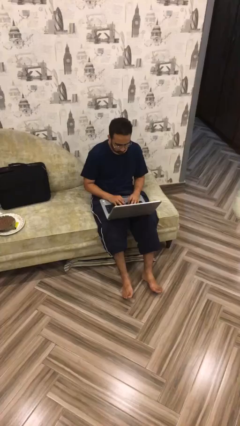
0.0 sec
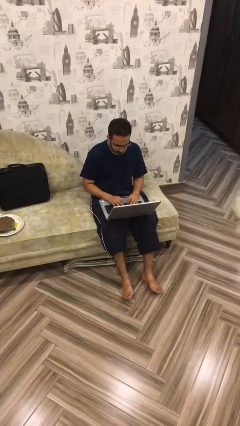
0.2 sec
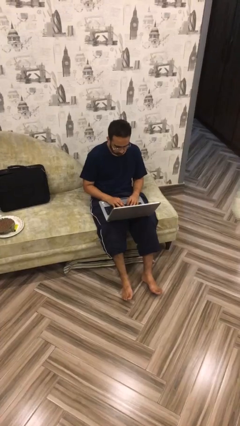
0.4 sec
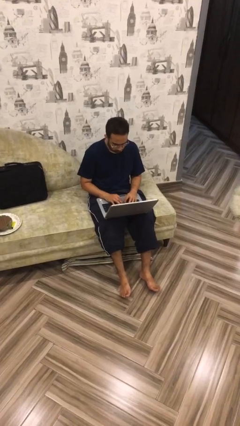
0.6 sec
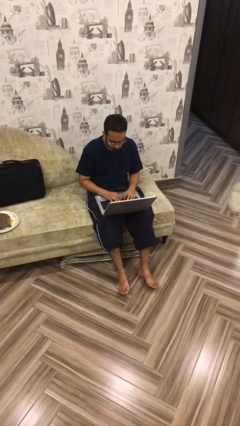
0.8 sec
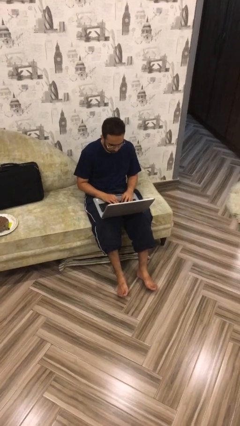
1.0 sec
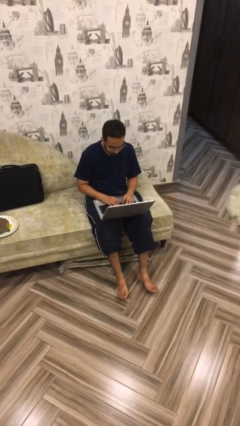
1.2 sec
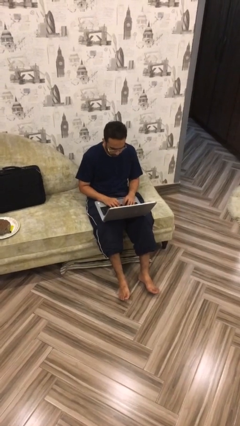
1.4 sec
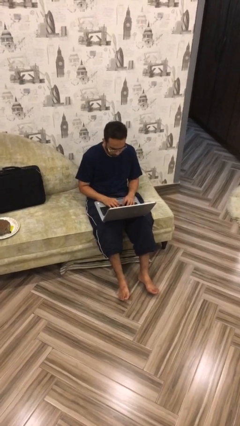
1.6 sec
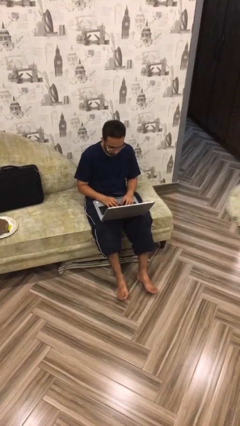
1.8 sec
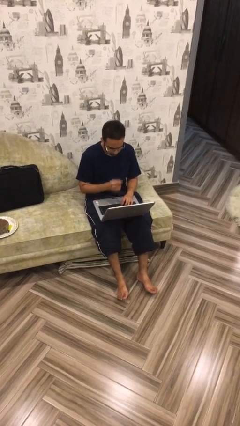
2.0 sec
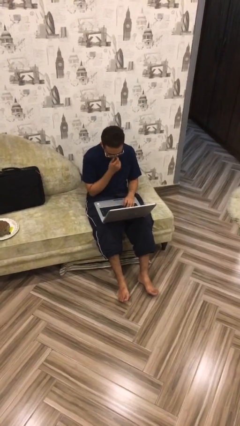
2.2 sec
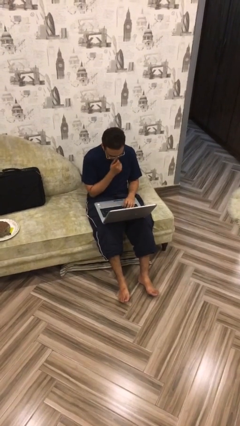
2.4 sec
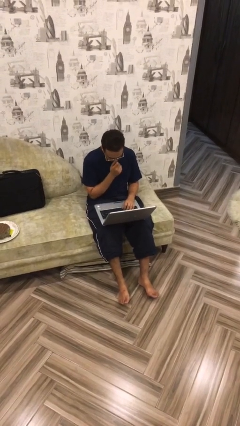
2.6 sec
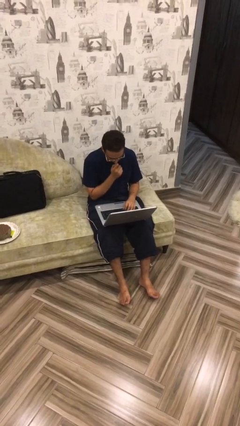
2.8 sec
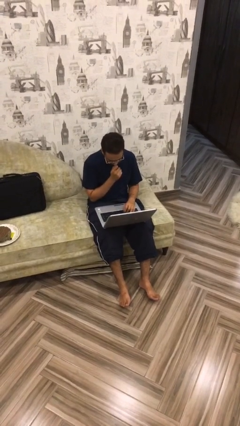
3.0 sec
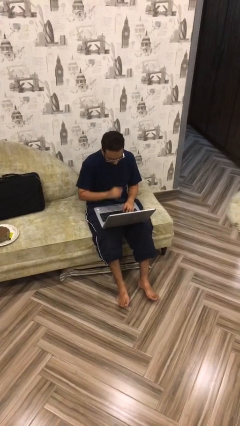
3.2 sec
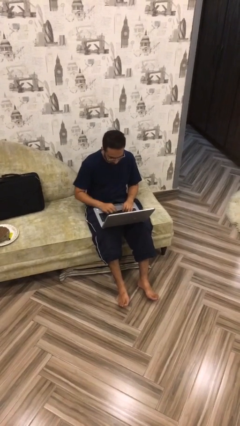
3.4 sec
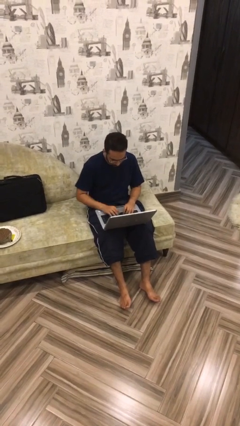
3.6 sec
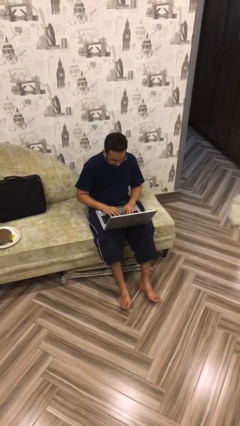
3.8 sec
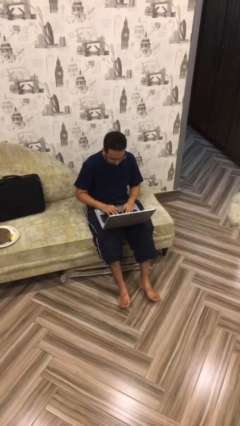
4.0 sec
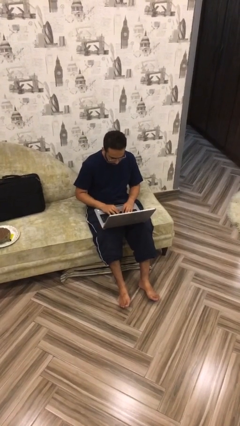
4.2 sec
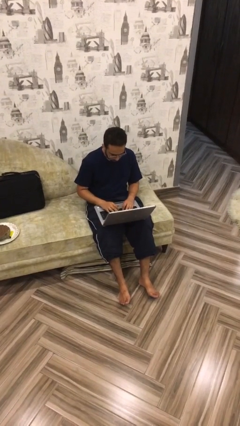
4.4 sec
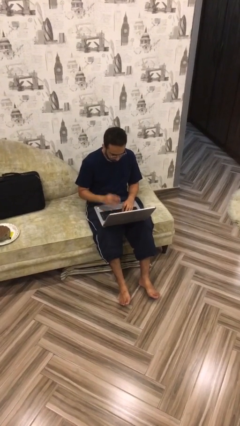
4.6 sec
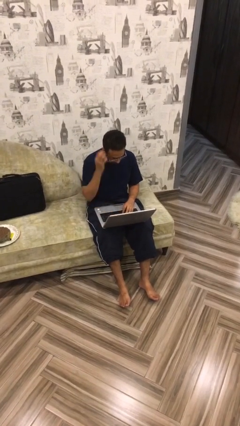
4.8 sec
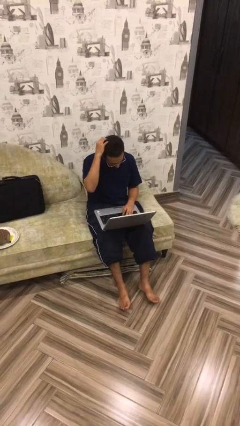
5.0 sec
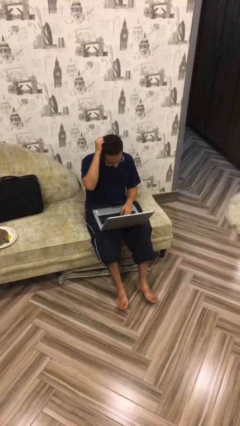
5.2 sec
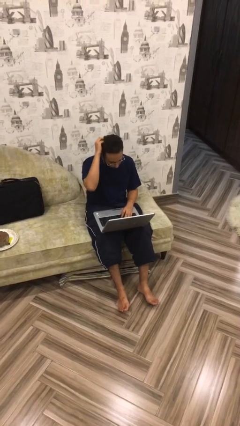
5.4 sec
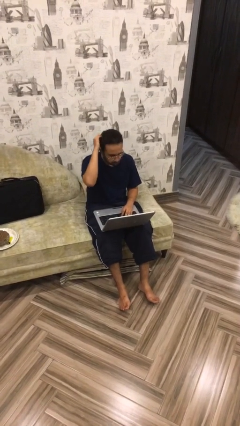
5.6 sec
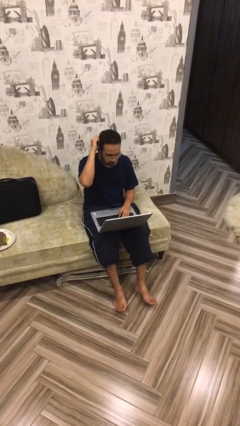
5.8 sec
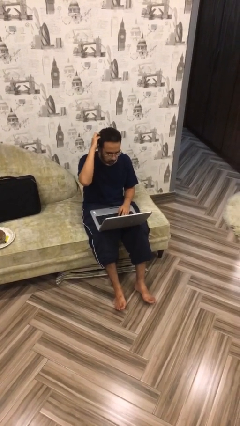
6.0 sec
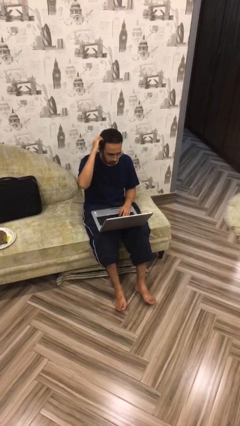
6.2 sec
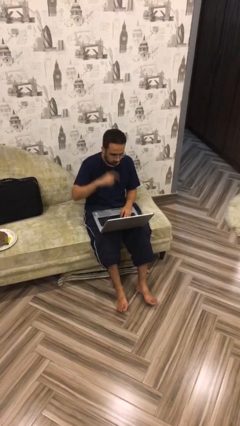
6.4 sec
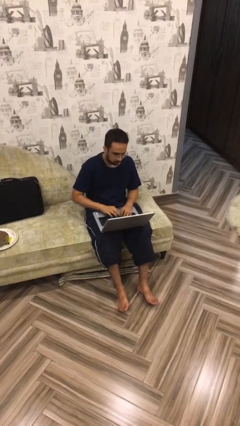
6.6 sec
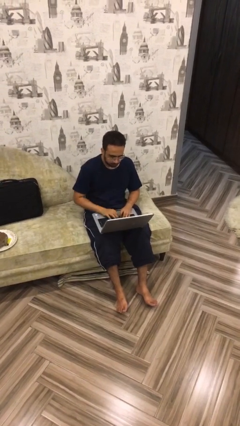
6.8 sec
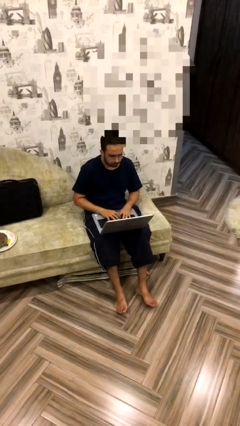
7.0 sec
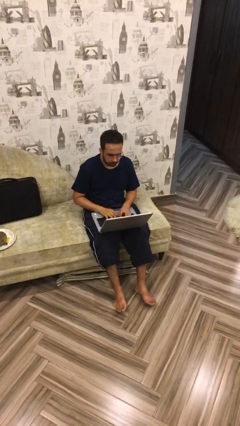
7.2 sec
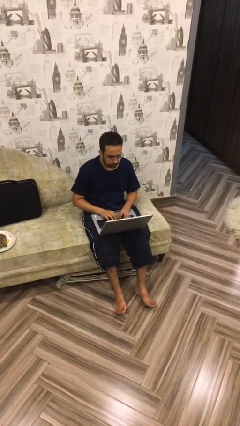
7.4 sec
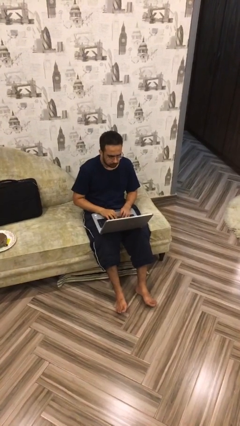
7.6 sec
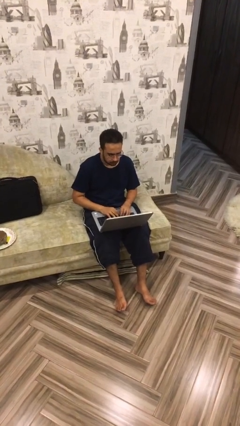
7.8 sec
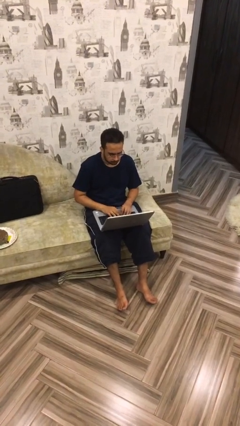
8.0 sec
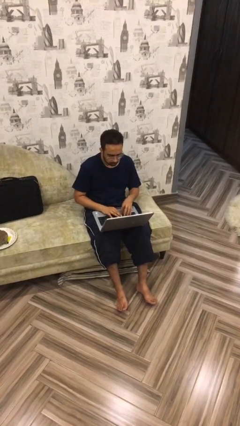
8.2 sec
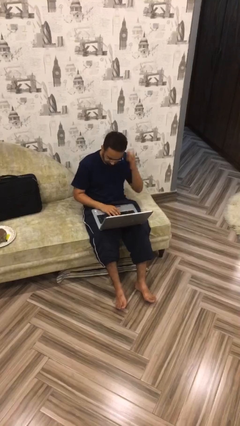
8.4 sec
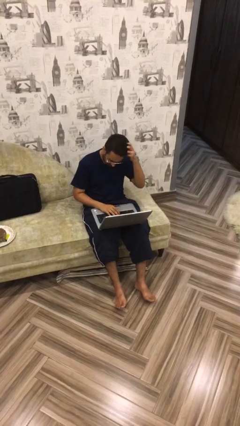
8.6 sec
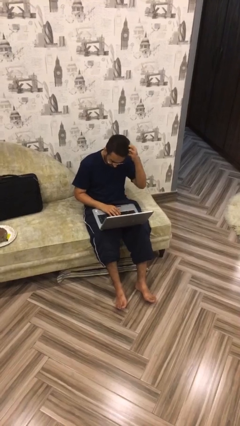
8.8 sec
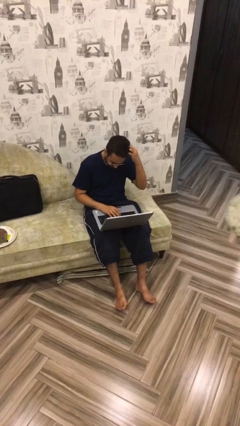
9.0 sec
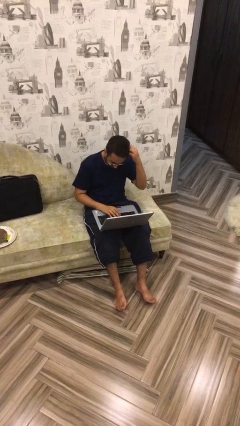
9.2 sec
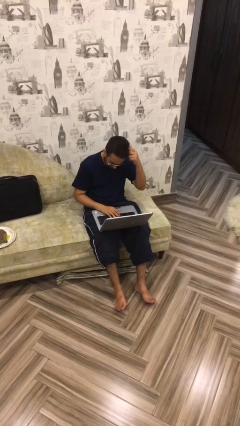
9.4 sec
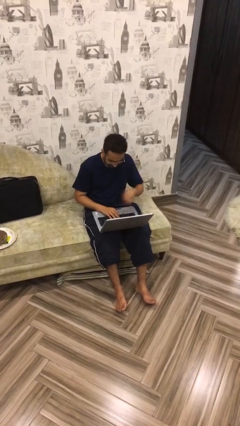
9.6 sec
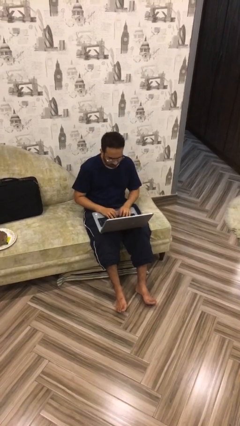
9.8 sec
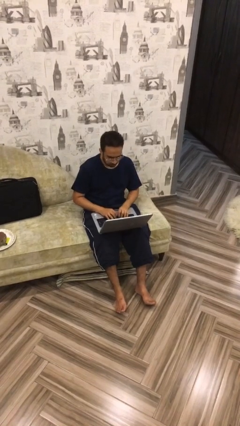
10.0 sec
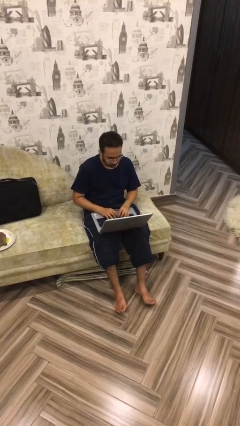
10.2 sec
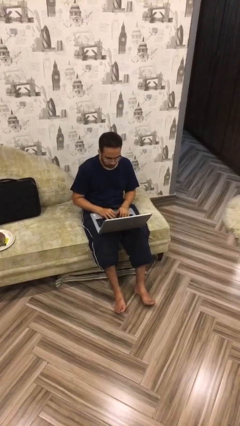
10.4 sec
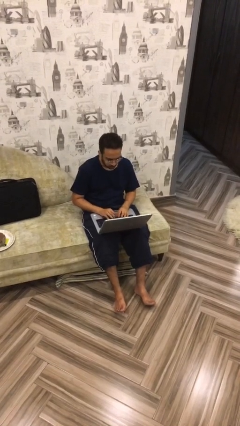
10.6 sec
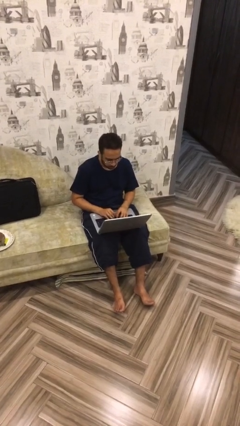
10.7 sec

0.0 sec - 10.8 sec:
person interacts with laptop

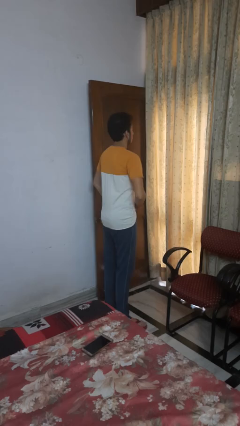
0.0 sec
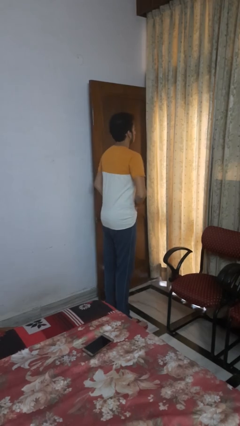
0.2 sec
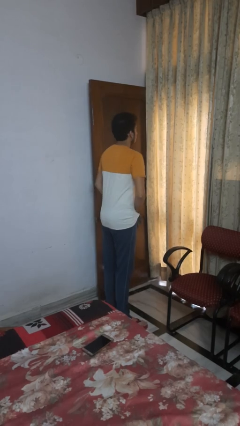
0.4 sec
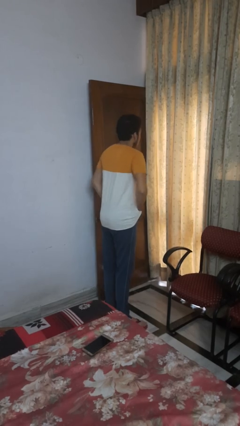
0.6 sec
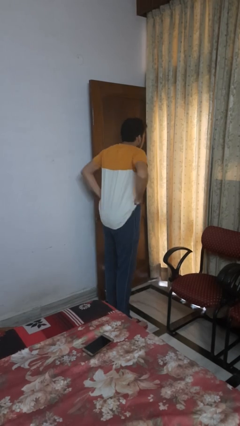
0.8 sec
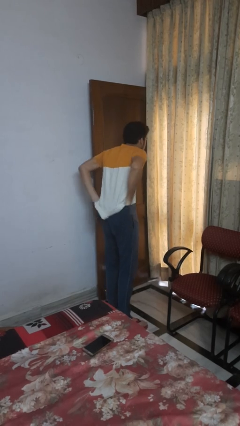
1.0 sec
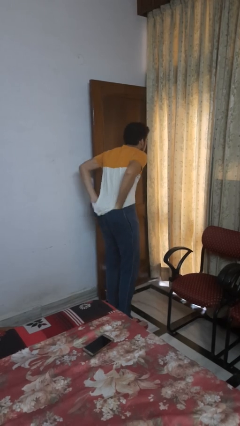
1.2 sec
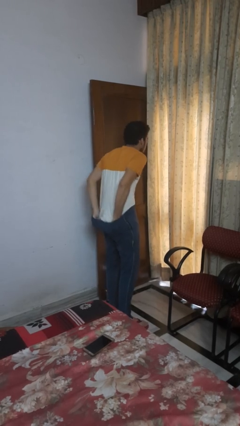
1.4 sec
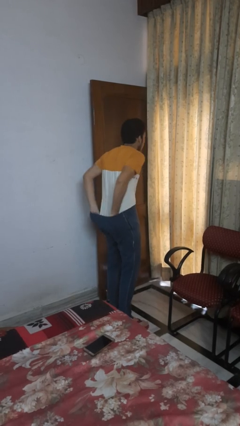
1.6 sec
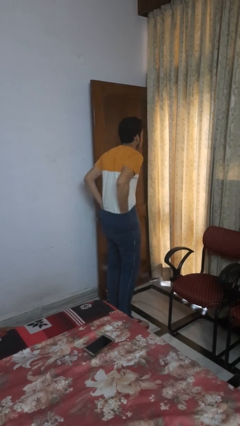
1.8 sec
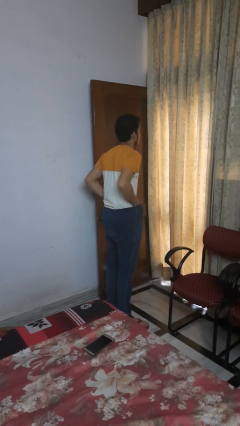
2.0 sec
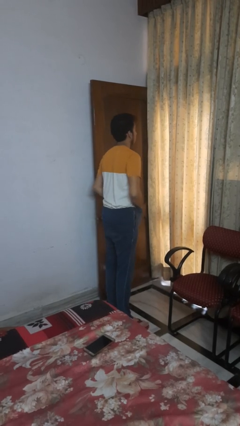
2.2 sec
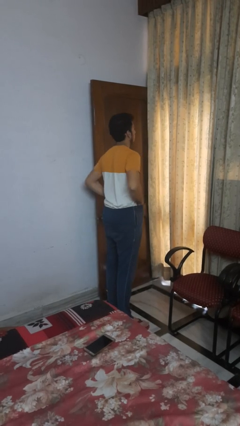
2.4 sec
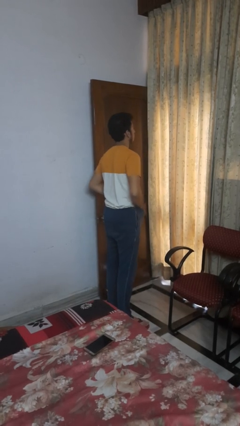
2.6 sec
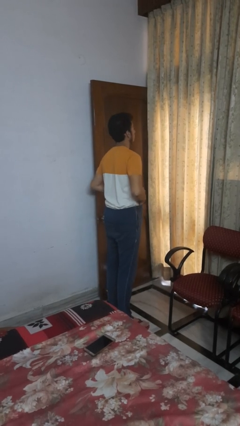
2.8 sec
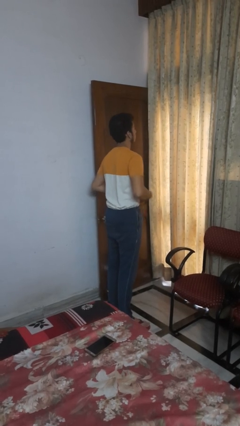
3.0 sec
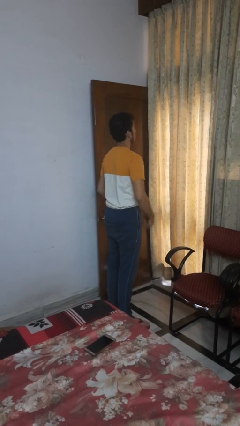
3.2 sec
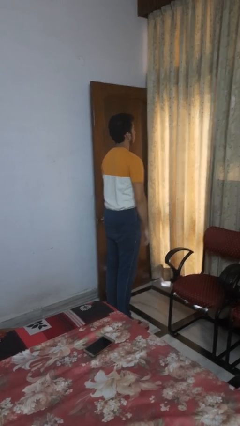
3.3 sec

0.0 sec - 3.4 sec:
person tucks in shirt

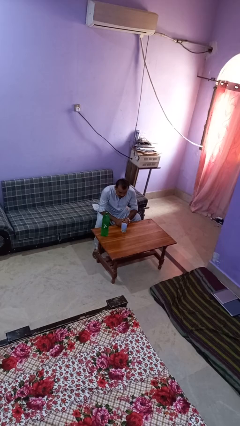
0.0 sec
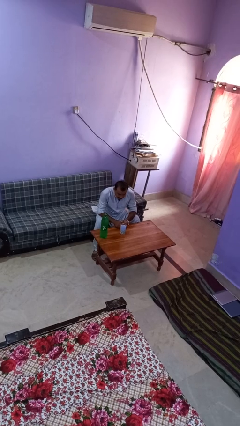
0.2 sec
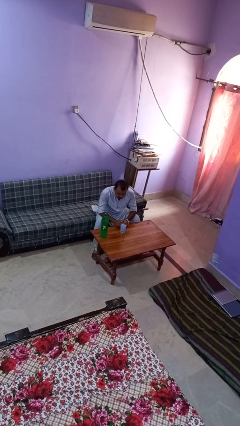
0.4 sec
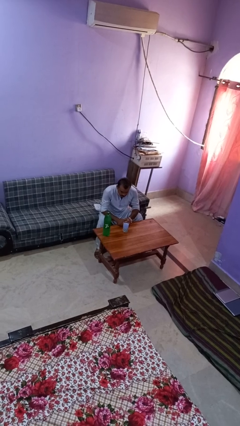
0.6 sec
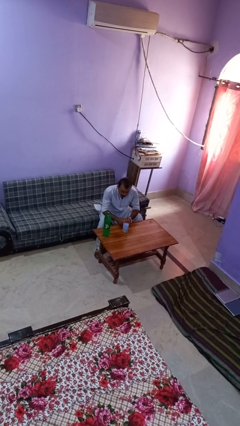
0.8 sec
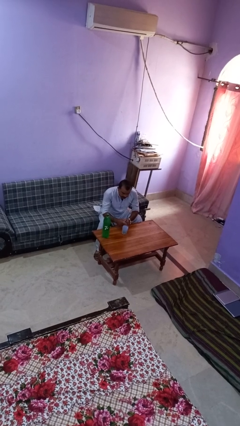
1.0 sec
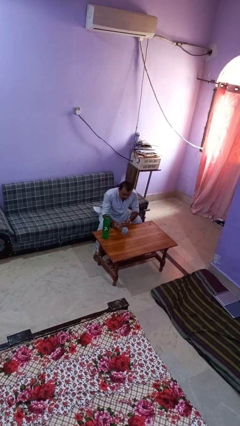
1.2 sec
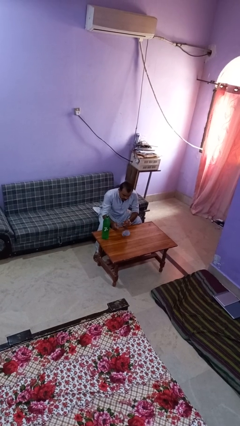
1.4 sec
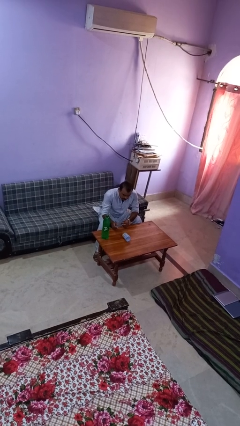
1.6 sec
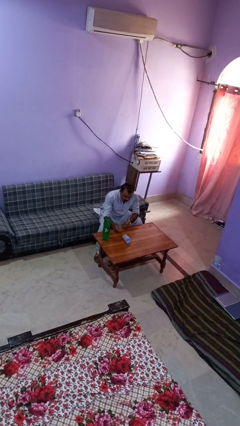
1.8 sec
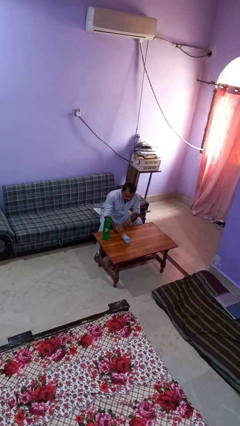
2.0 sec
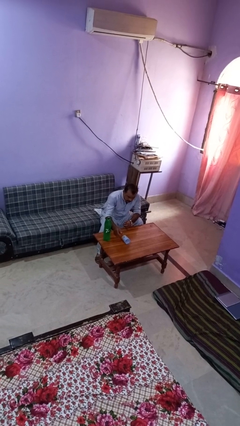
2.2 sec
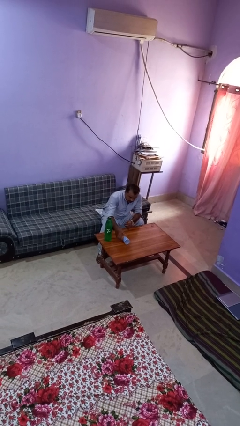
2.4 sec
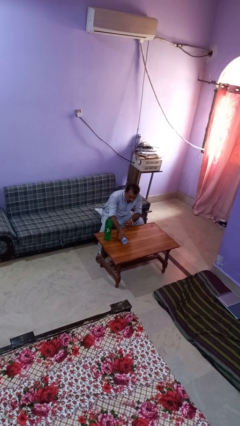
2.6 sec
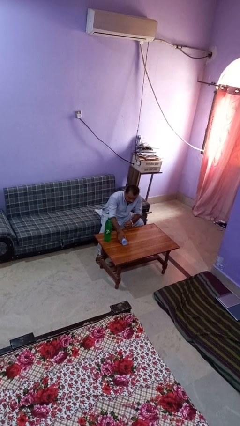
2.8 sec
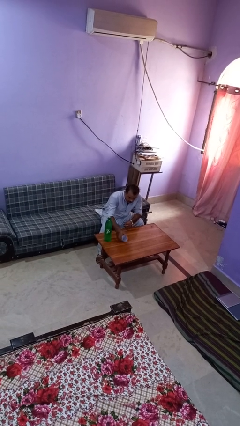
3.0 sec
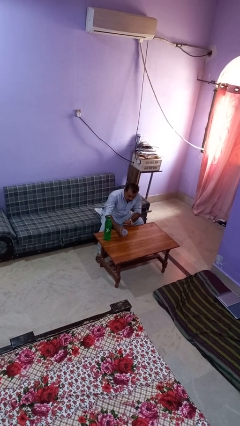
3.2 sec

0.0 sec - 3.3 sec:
person knocks over glass

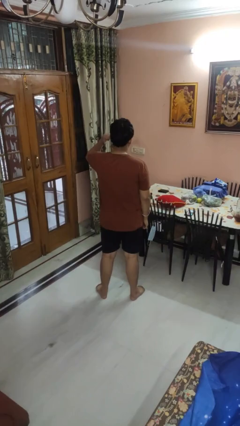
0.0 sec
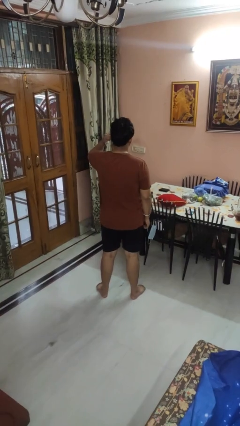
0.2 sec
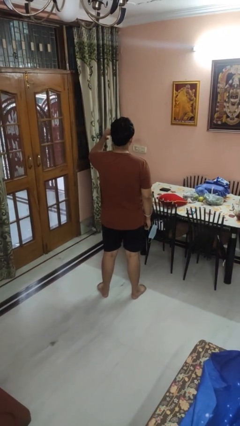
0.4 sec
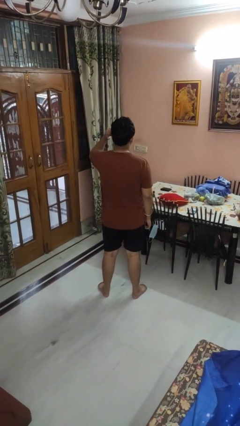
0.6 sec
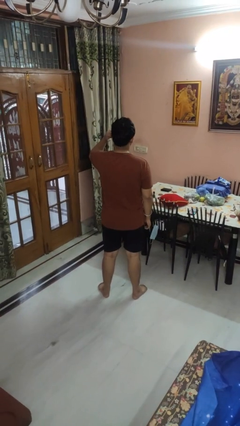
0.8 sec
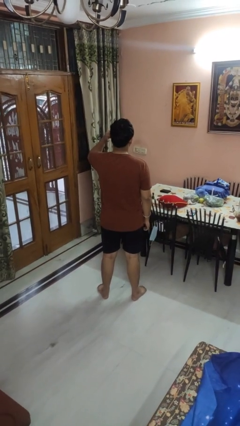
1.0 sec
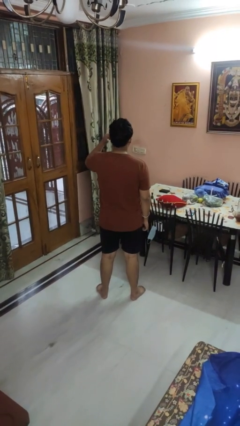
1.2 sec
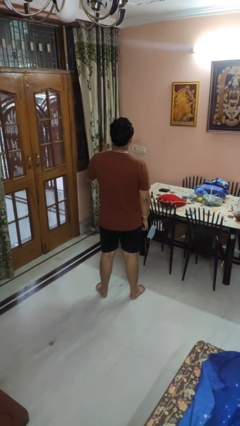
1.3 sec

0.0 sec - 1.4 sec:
person gestures behind me
